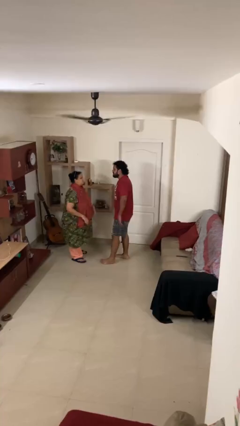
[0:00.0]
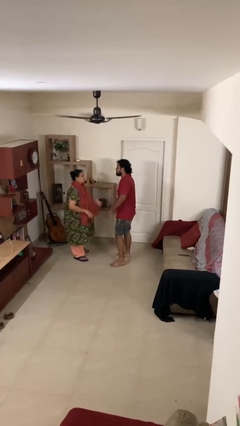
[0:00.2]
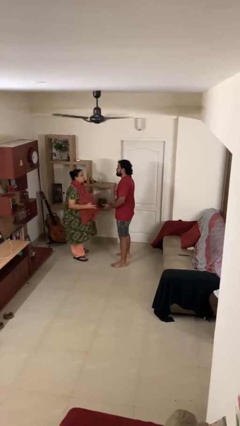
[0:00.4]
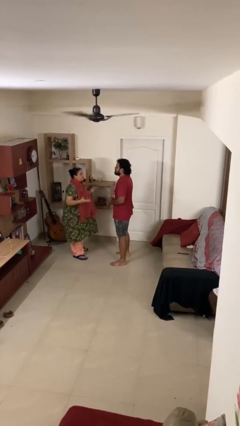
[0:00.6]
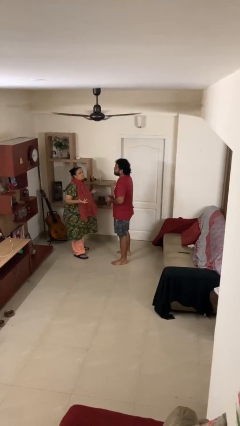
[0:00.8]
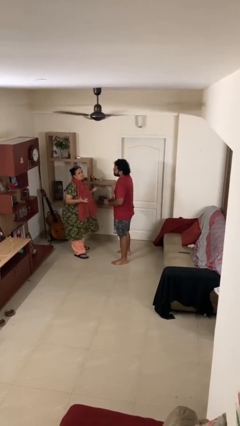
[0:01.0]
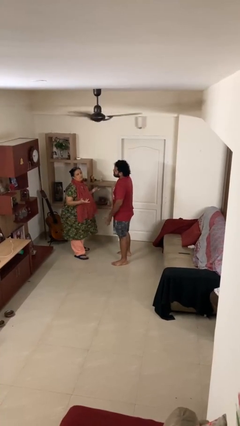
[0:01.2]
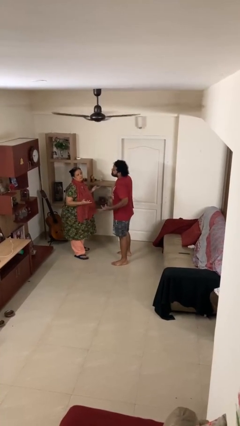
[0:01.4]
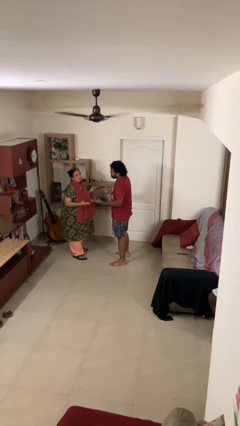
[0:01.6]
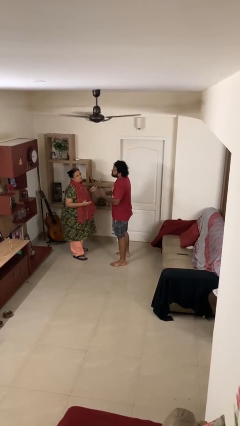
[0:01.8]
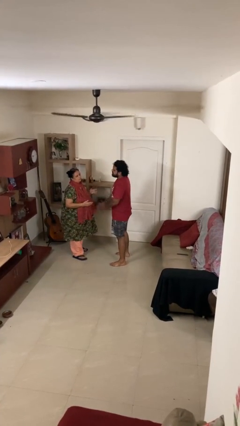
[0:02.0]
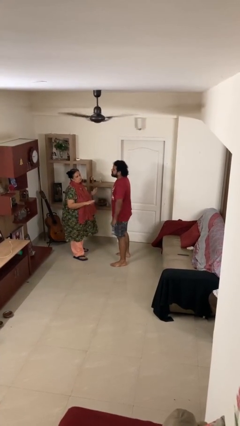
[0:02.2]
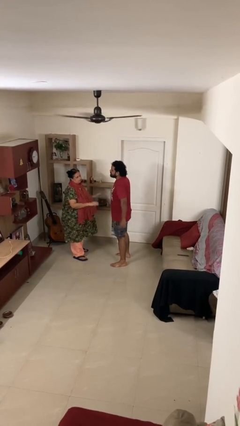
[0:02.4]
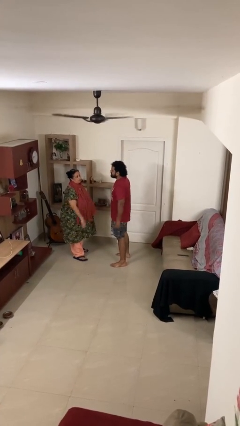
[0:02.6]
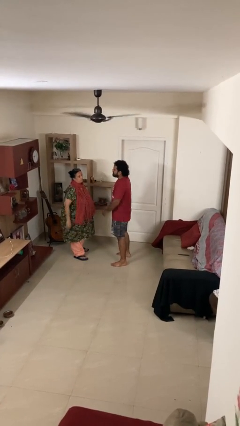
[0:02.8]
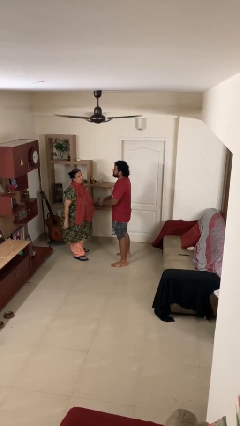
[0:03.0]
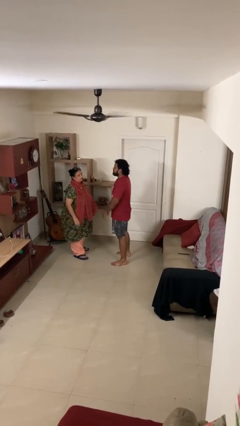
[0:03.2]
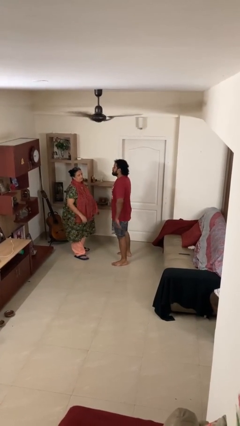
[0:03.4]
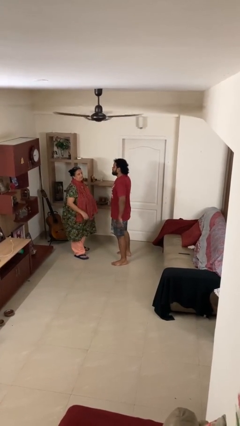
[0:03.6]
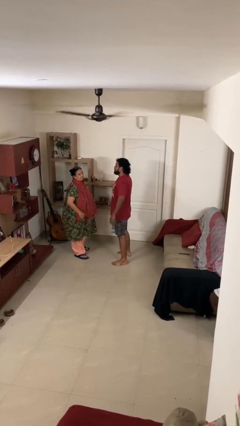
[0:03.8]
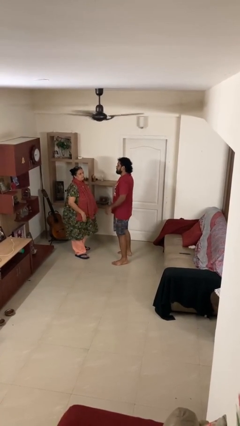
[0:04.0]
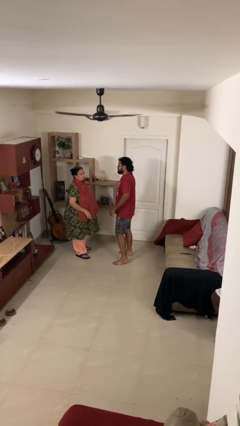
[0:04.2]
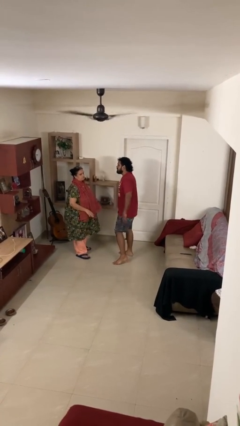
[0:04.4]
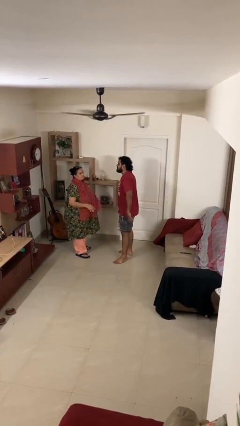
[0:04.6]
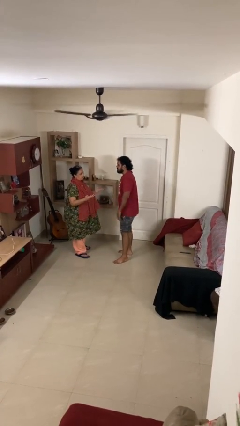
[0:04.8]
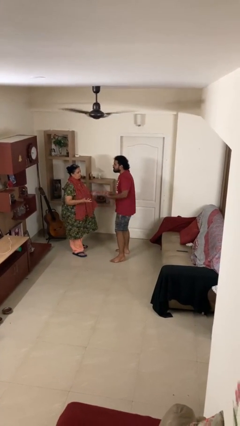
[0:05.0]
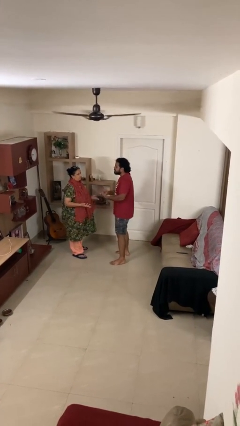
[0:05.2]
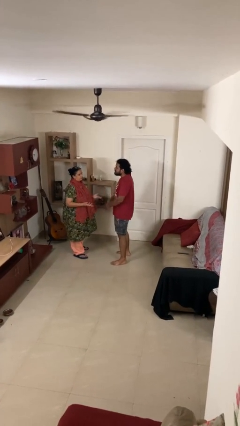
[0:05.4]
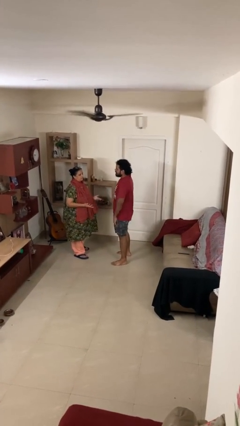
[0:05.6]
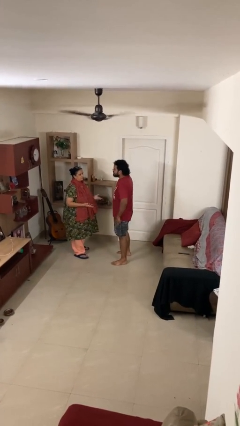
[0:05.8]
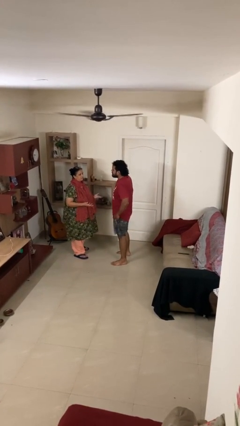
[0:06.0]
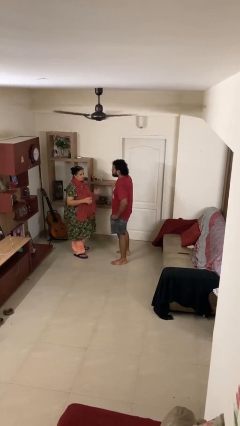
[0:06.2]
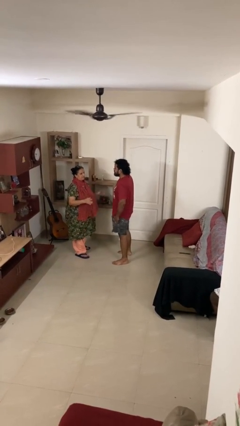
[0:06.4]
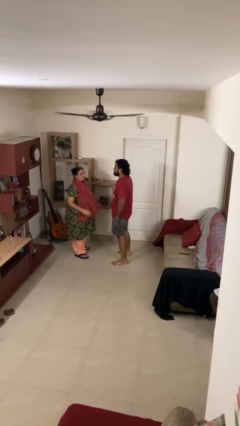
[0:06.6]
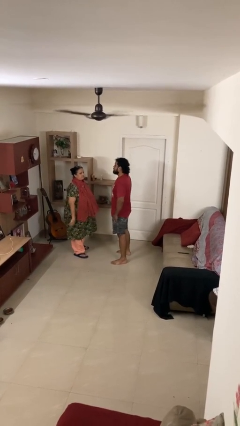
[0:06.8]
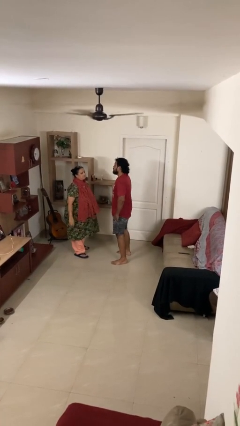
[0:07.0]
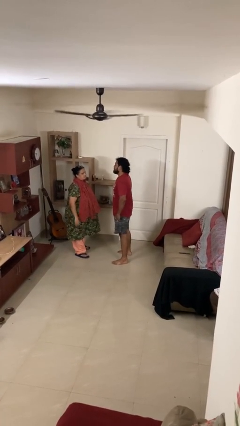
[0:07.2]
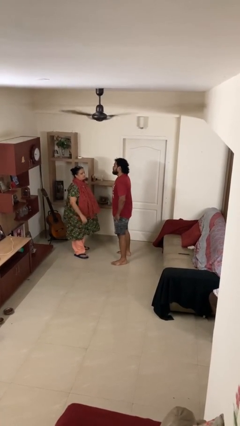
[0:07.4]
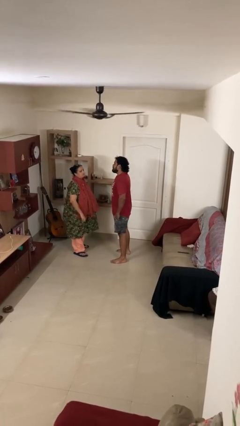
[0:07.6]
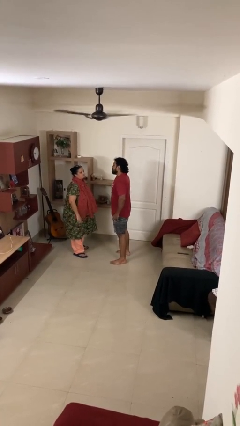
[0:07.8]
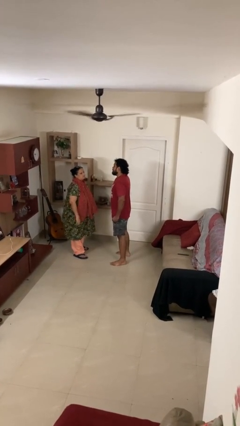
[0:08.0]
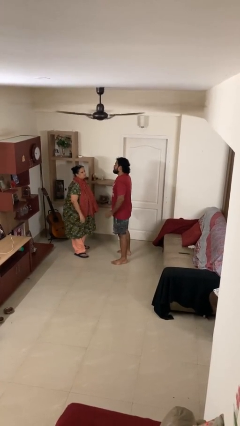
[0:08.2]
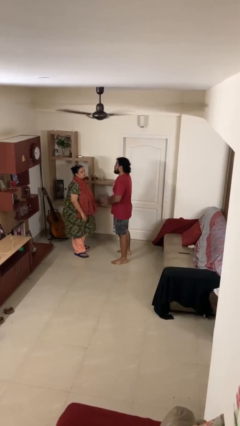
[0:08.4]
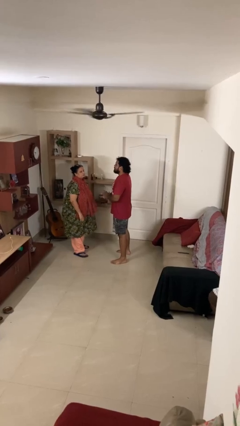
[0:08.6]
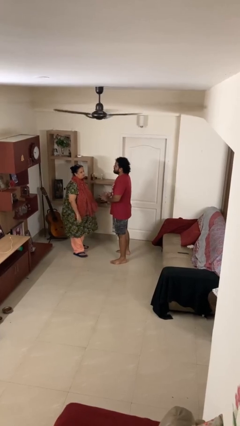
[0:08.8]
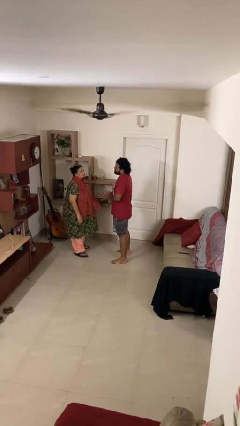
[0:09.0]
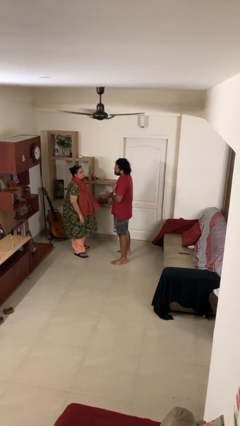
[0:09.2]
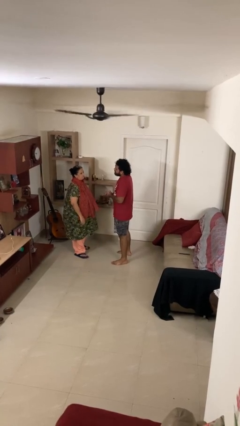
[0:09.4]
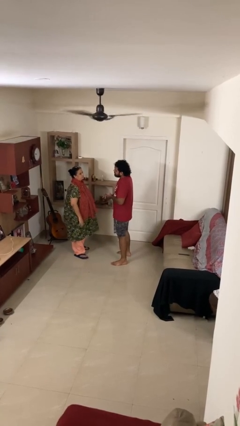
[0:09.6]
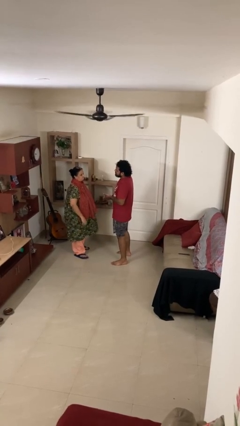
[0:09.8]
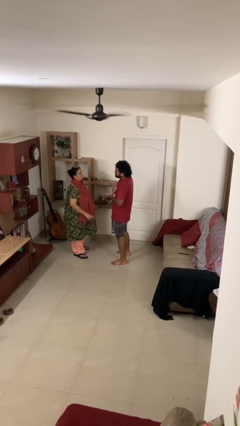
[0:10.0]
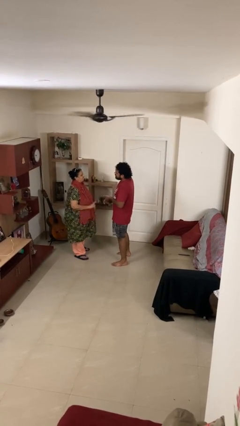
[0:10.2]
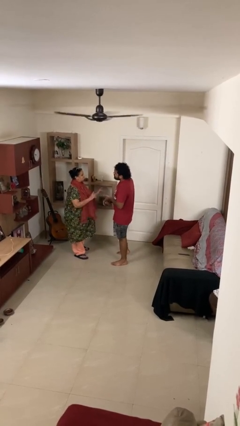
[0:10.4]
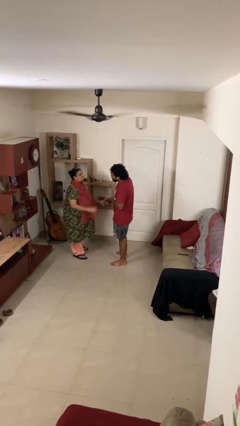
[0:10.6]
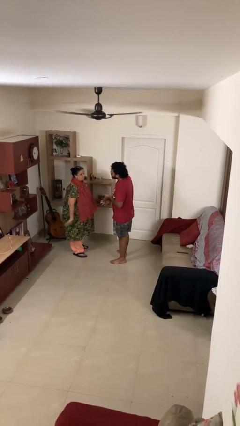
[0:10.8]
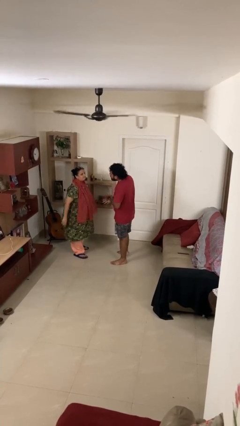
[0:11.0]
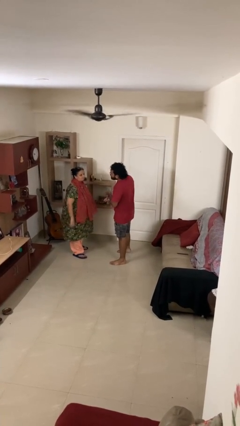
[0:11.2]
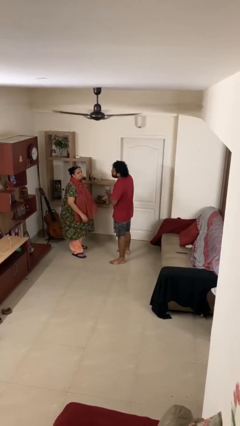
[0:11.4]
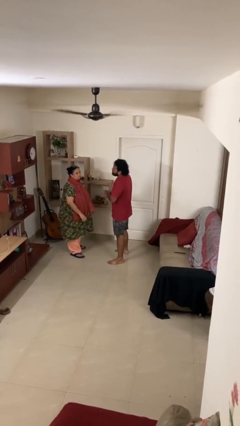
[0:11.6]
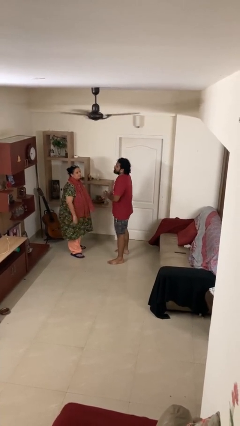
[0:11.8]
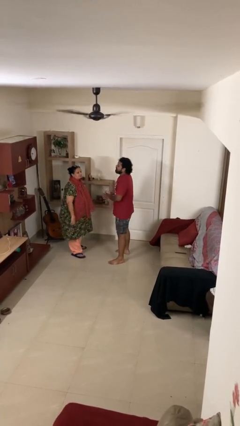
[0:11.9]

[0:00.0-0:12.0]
person talks to person

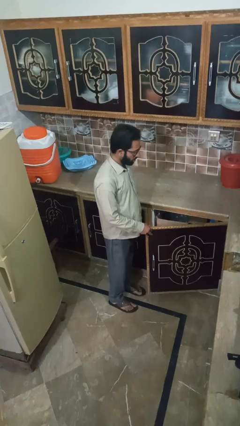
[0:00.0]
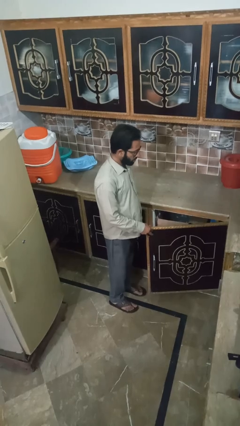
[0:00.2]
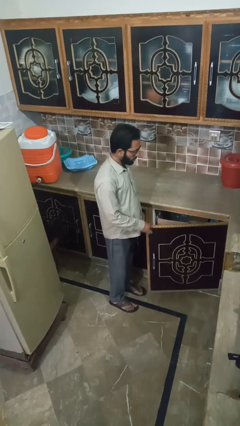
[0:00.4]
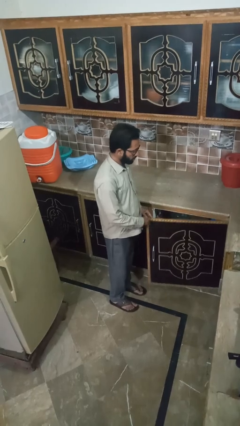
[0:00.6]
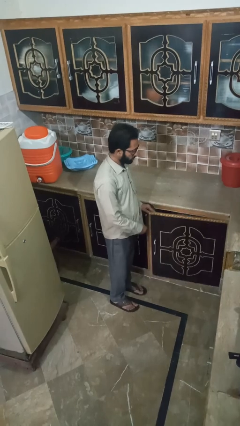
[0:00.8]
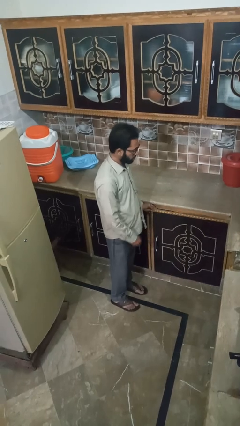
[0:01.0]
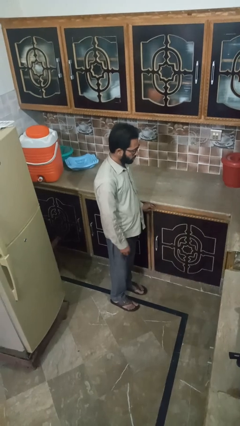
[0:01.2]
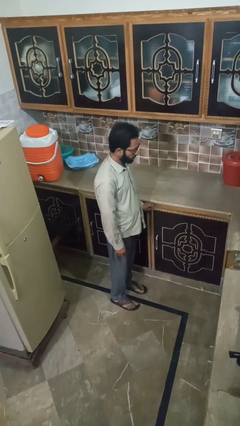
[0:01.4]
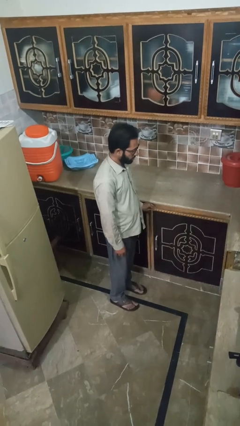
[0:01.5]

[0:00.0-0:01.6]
person closes cabinet

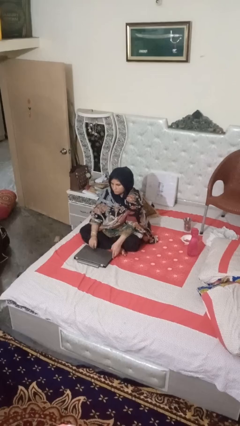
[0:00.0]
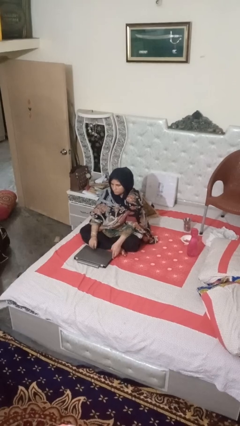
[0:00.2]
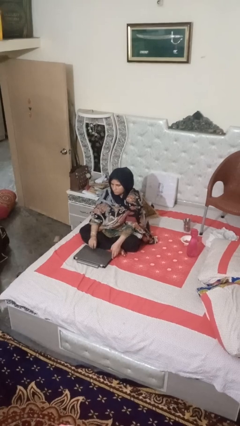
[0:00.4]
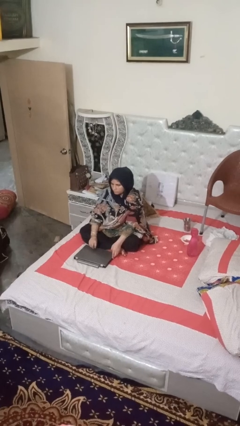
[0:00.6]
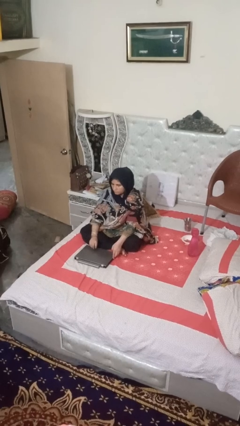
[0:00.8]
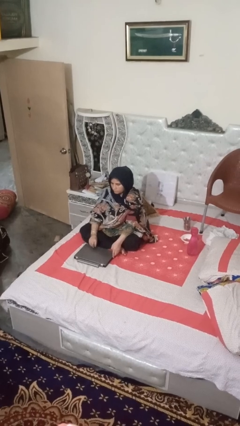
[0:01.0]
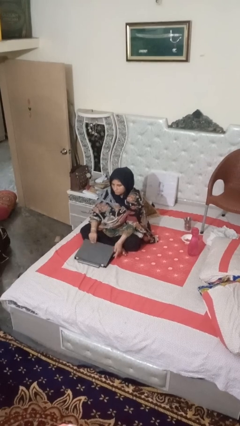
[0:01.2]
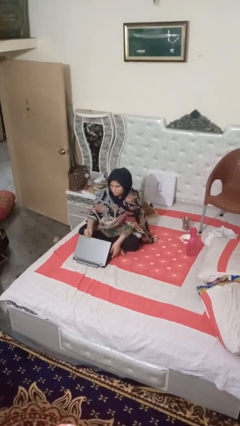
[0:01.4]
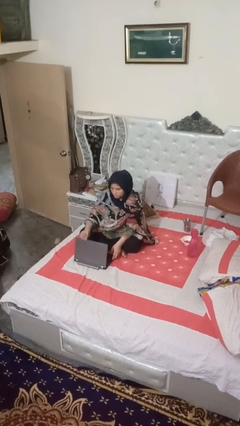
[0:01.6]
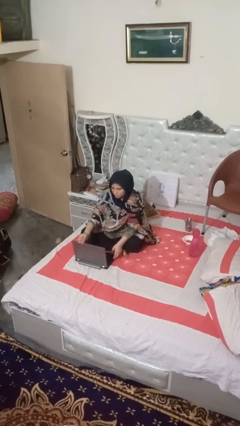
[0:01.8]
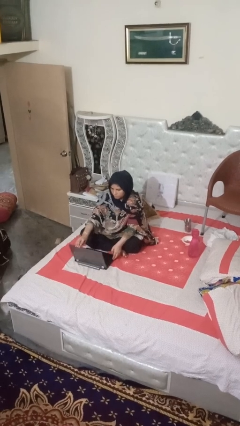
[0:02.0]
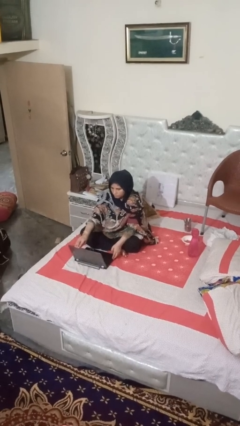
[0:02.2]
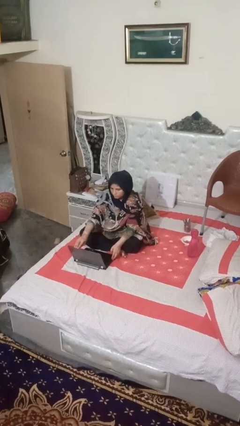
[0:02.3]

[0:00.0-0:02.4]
person opens laptop

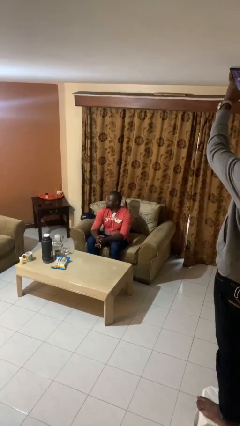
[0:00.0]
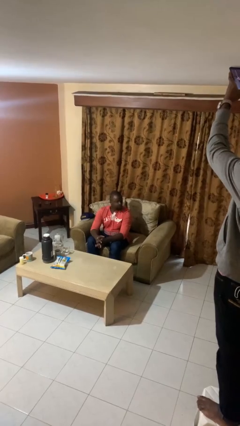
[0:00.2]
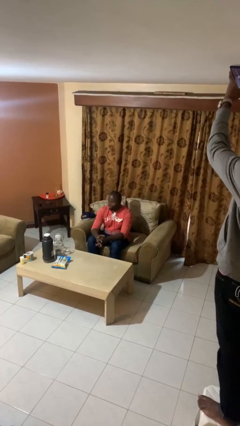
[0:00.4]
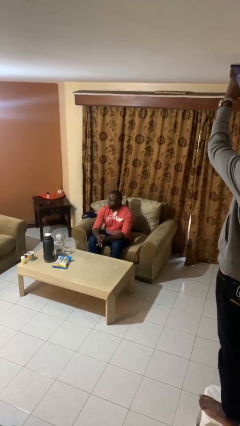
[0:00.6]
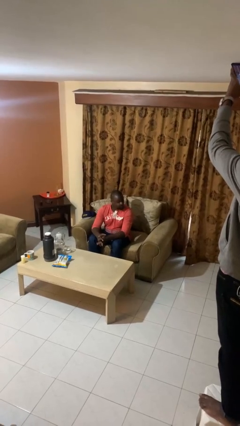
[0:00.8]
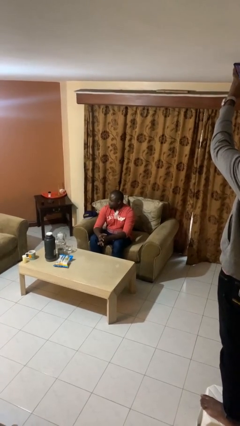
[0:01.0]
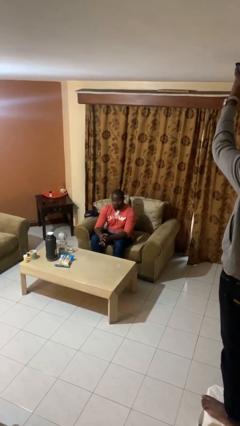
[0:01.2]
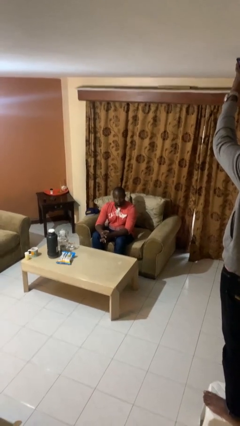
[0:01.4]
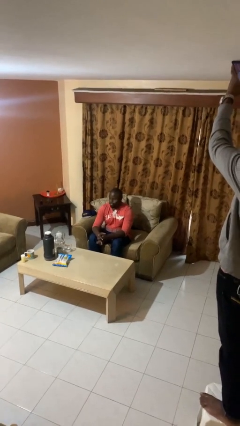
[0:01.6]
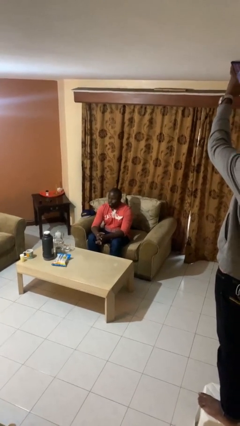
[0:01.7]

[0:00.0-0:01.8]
person shakes head
